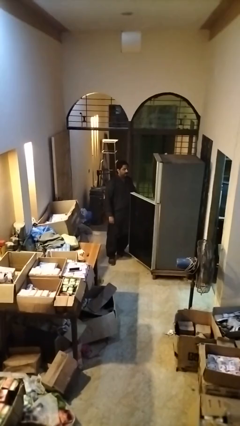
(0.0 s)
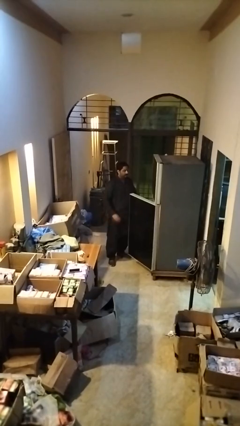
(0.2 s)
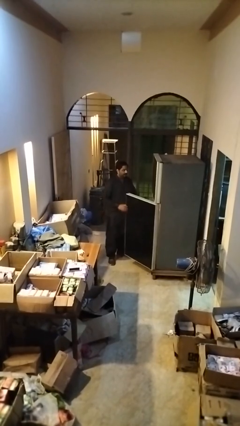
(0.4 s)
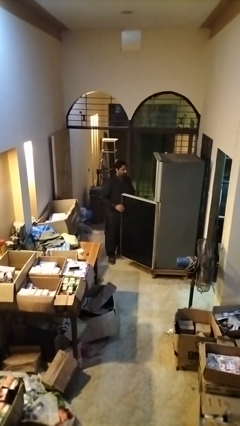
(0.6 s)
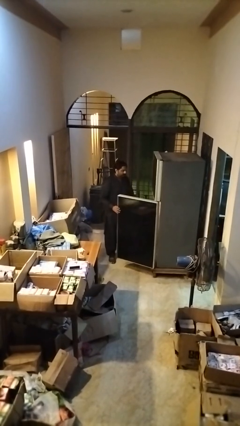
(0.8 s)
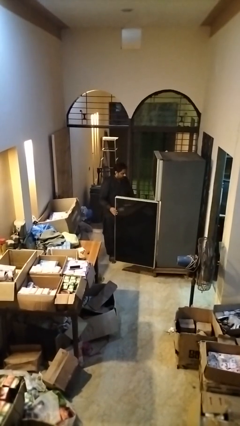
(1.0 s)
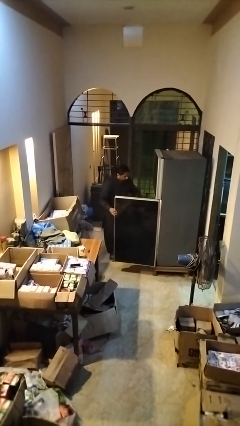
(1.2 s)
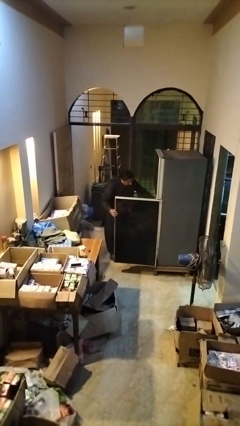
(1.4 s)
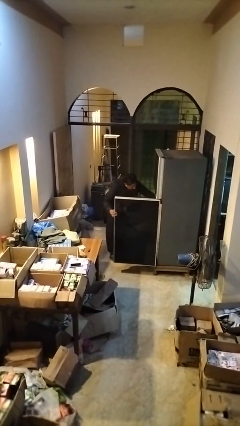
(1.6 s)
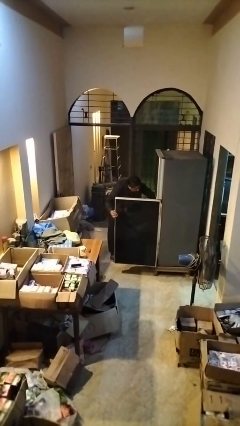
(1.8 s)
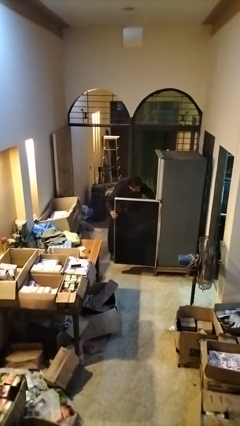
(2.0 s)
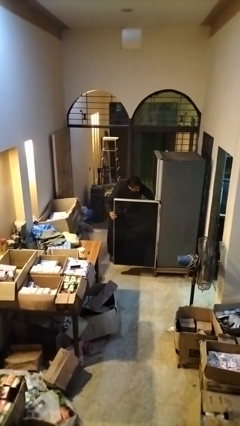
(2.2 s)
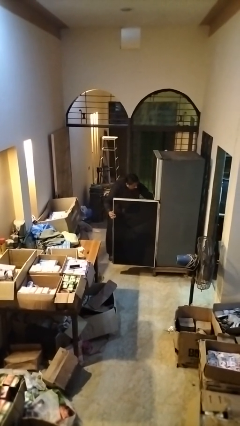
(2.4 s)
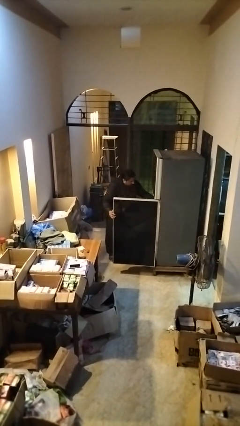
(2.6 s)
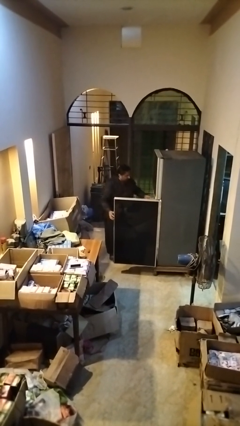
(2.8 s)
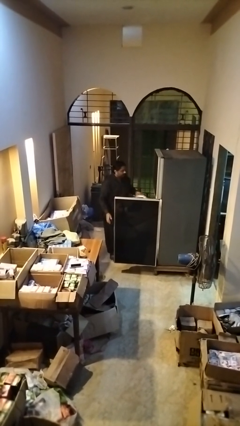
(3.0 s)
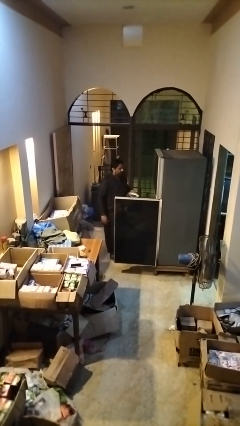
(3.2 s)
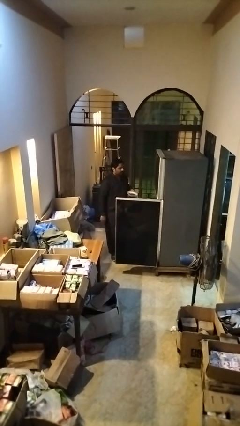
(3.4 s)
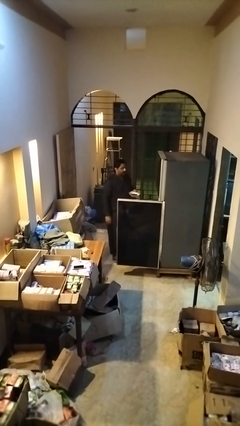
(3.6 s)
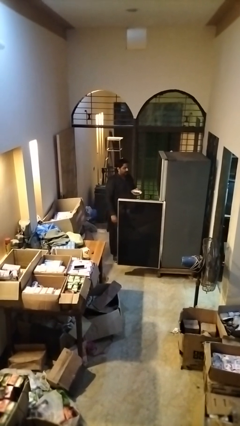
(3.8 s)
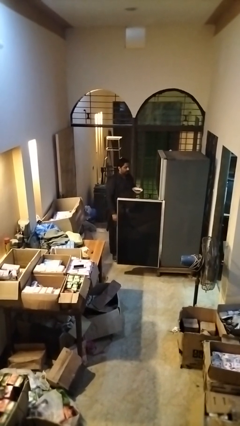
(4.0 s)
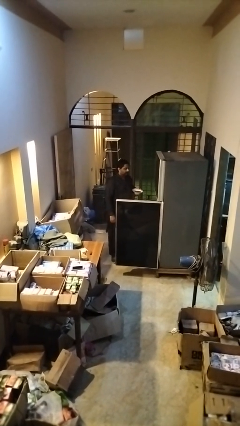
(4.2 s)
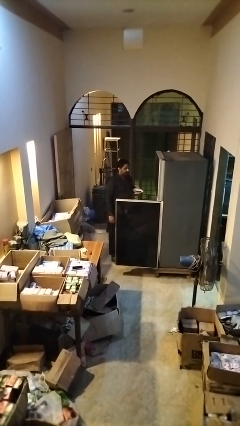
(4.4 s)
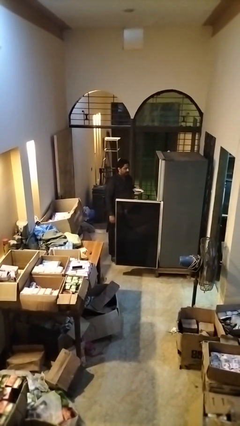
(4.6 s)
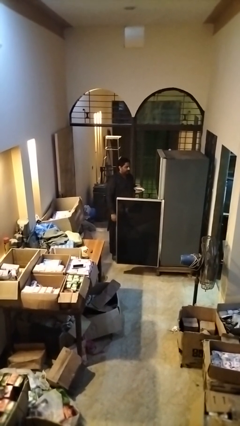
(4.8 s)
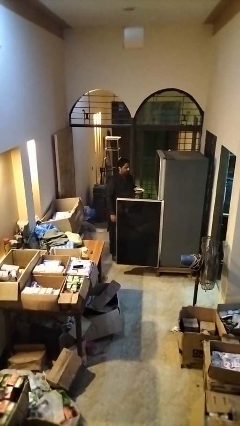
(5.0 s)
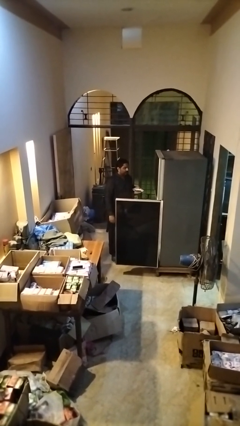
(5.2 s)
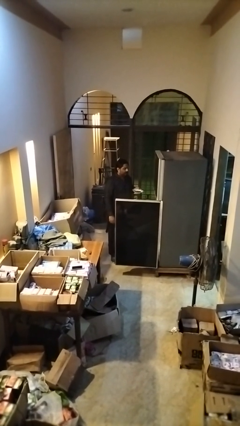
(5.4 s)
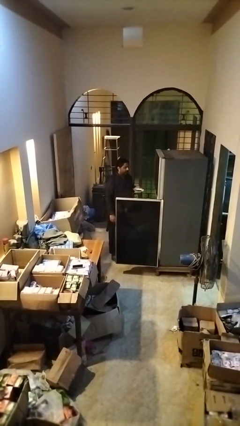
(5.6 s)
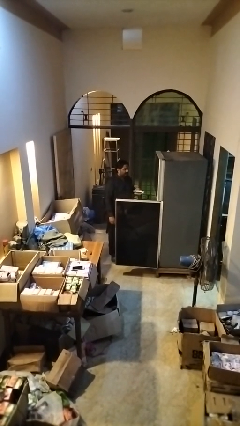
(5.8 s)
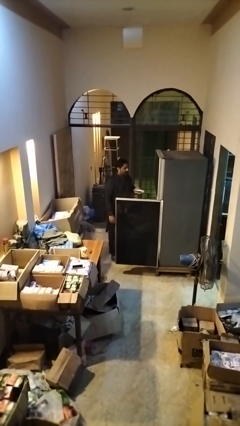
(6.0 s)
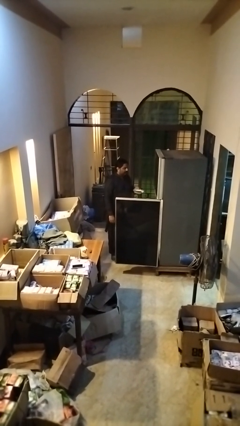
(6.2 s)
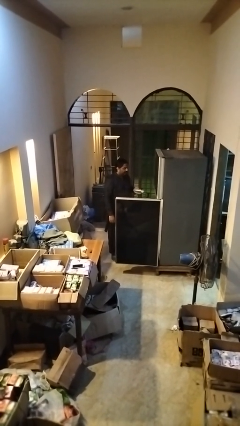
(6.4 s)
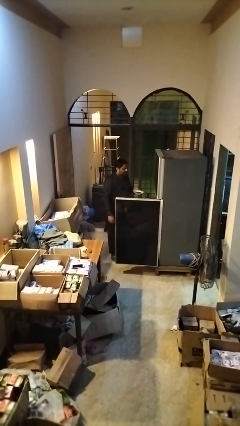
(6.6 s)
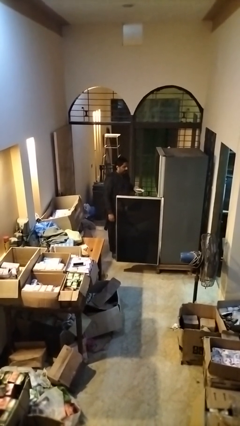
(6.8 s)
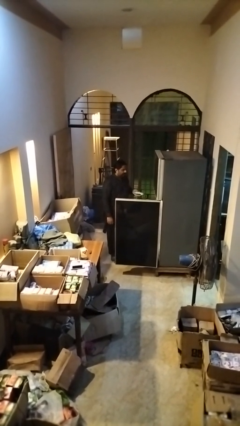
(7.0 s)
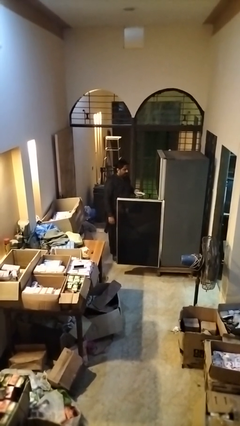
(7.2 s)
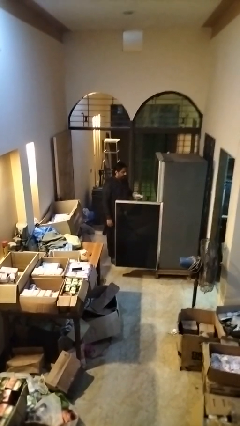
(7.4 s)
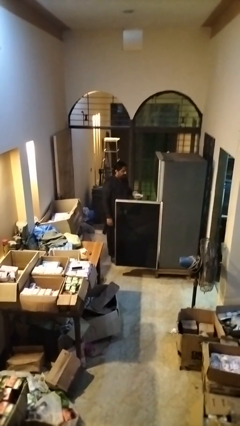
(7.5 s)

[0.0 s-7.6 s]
person puts object into refrigerator

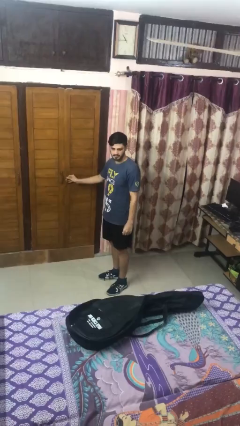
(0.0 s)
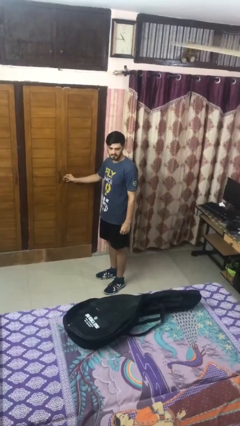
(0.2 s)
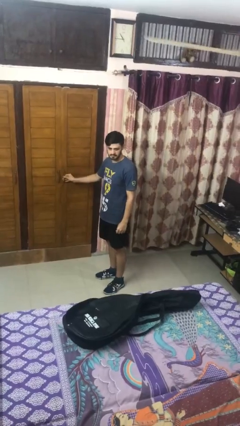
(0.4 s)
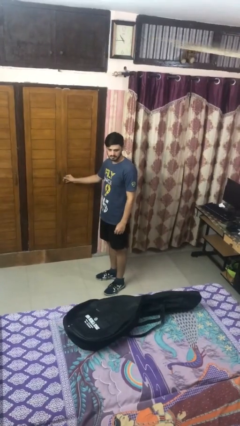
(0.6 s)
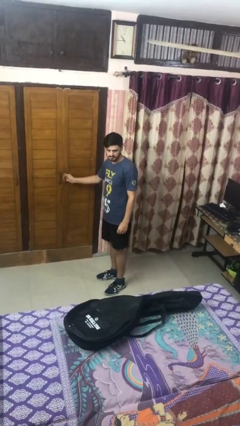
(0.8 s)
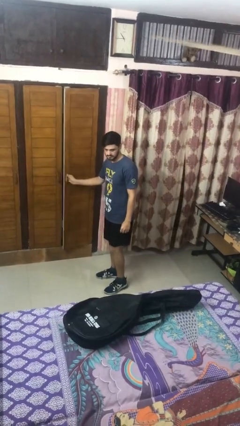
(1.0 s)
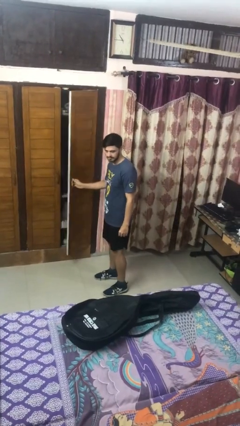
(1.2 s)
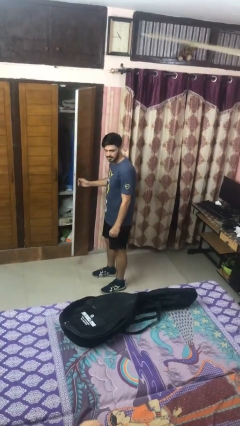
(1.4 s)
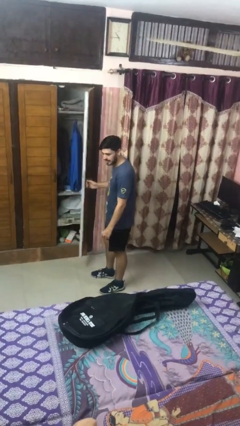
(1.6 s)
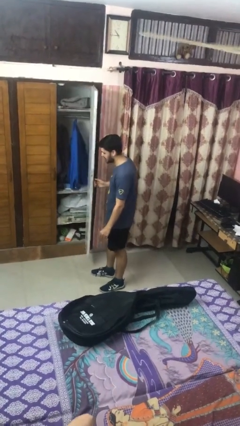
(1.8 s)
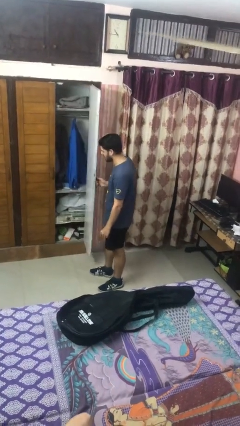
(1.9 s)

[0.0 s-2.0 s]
person opens closet door

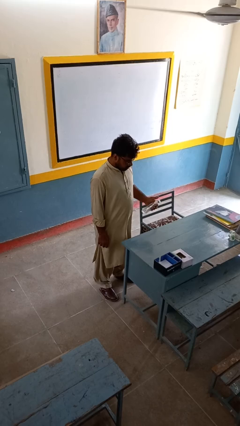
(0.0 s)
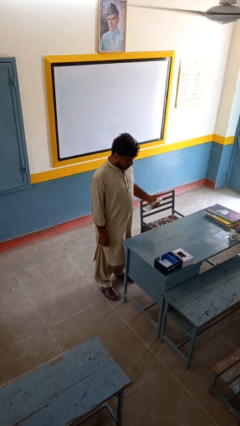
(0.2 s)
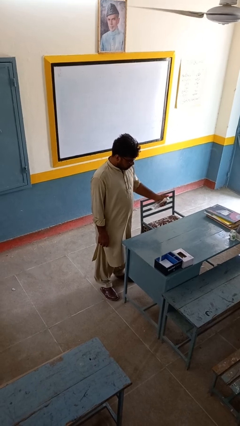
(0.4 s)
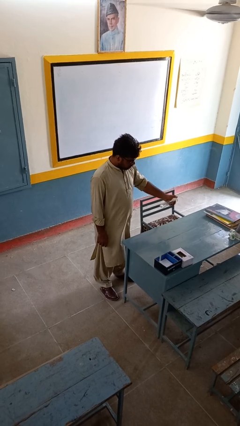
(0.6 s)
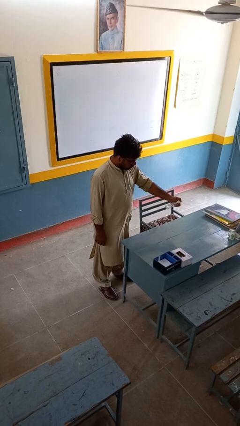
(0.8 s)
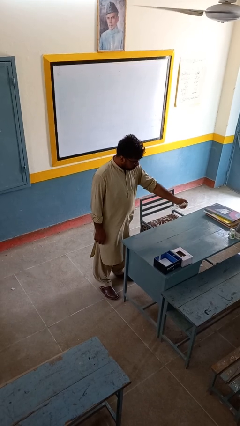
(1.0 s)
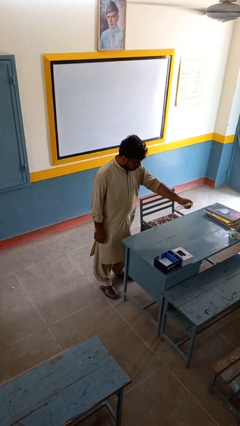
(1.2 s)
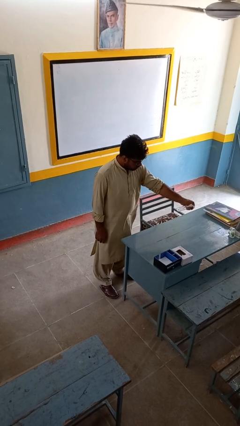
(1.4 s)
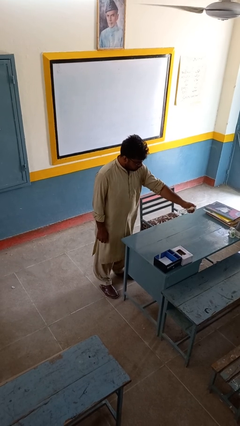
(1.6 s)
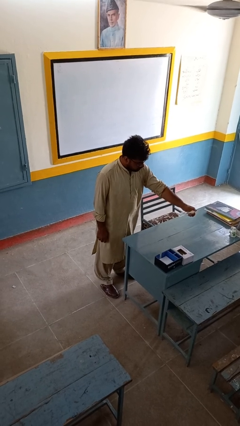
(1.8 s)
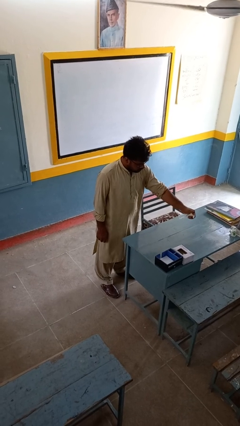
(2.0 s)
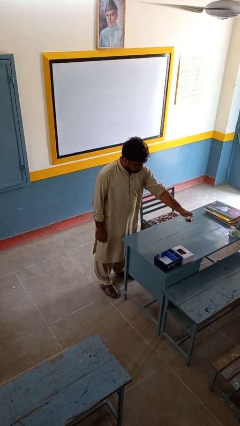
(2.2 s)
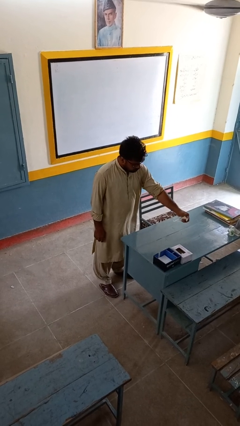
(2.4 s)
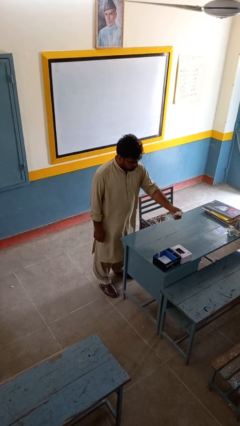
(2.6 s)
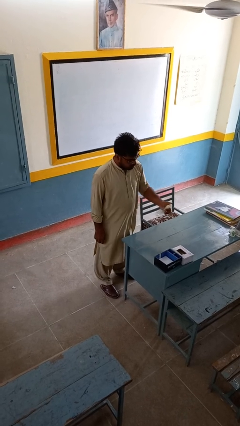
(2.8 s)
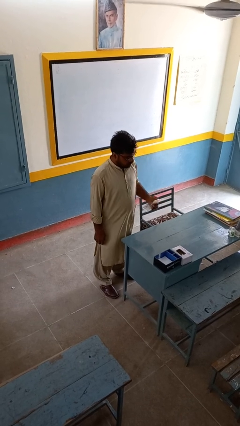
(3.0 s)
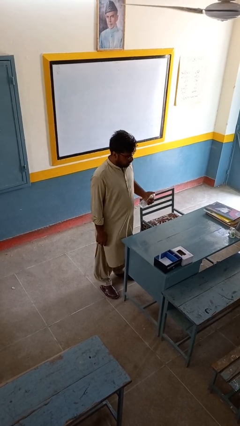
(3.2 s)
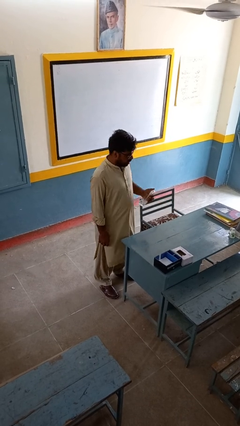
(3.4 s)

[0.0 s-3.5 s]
person sprays from bottle

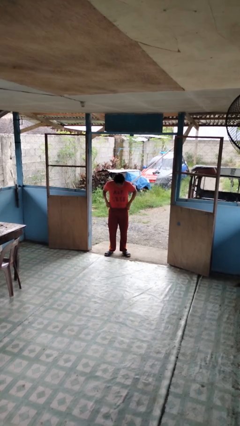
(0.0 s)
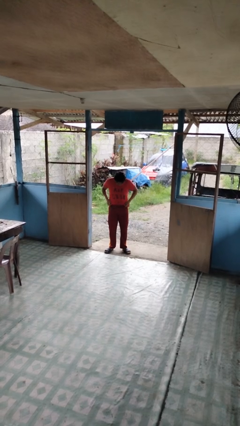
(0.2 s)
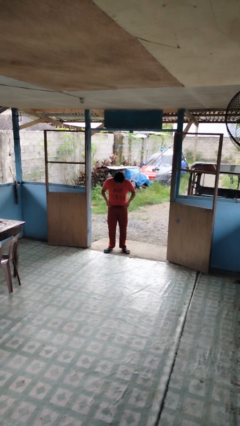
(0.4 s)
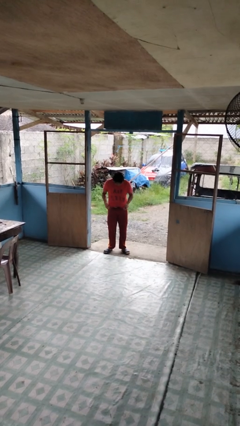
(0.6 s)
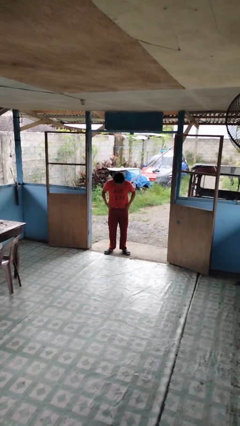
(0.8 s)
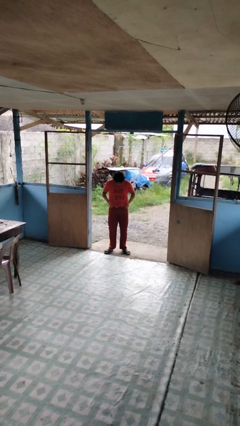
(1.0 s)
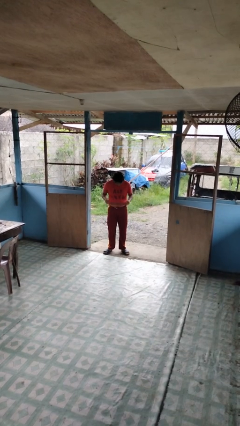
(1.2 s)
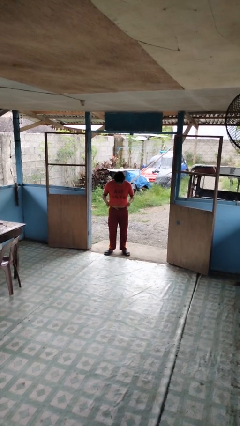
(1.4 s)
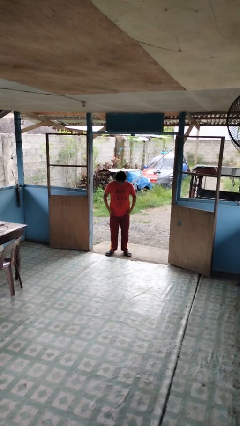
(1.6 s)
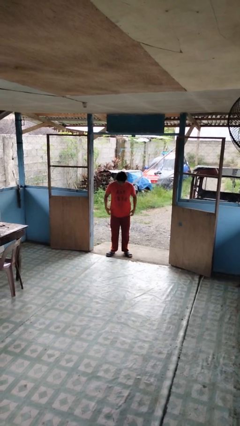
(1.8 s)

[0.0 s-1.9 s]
person untucks shirt

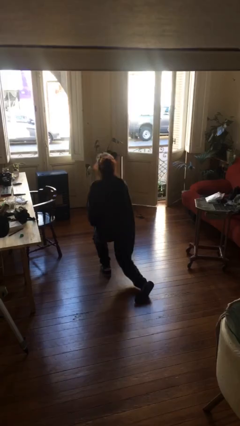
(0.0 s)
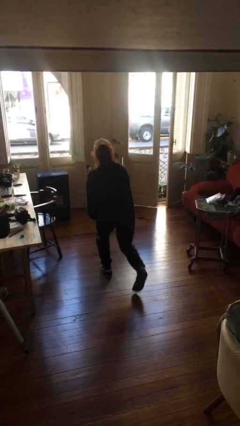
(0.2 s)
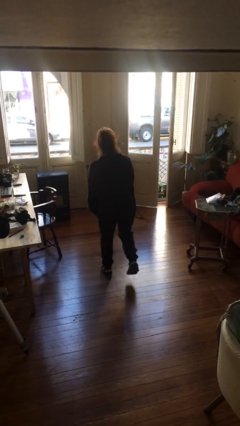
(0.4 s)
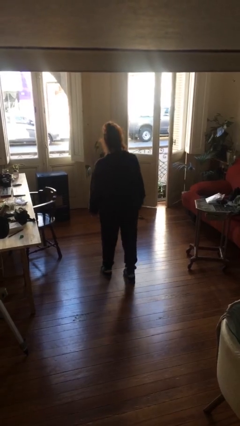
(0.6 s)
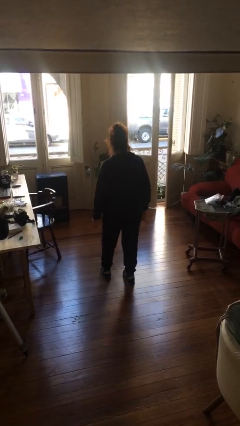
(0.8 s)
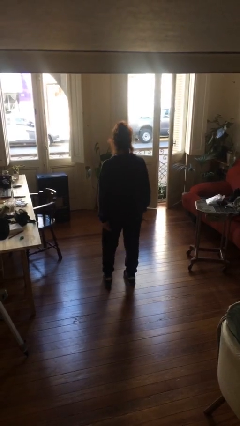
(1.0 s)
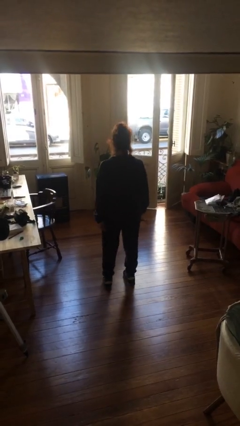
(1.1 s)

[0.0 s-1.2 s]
person stands up from floor

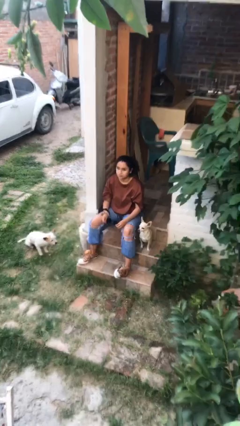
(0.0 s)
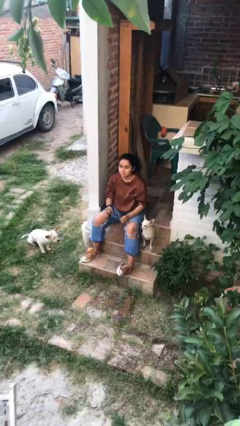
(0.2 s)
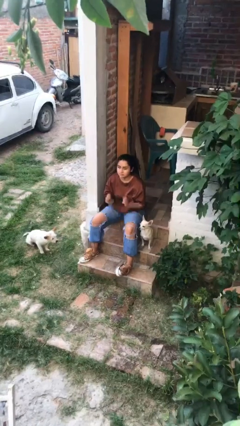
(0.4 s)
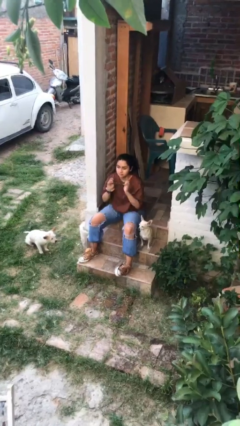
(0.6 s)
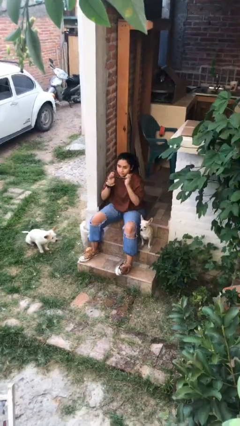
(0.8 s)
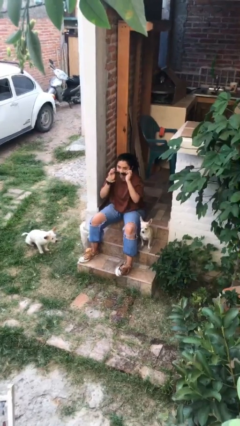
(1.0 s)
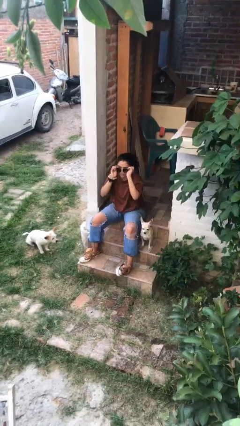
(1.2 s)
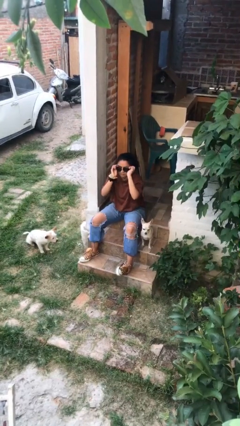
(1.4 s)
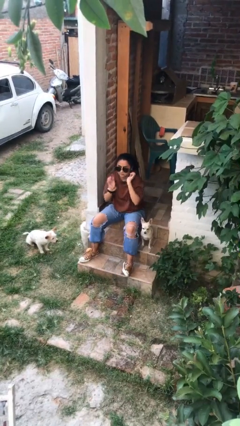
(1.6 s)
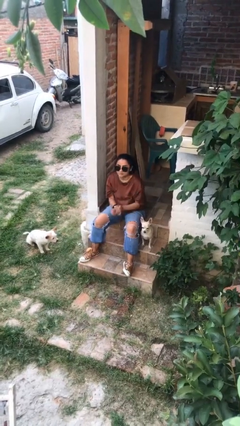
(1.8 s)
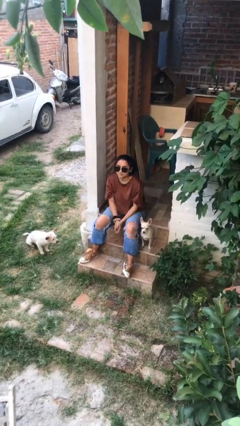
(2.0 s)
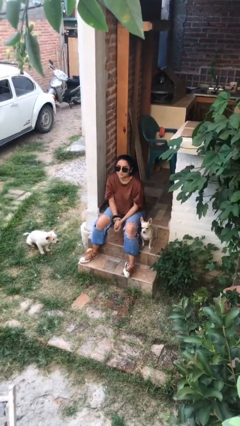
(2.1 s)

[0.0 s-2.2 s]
person puts on sunglasses
